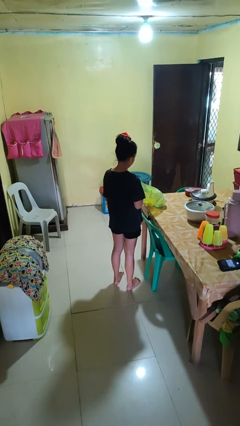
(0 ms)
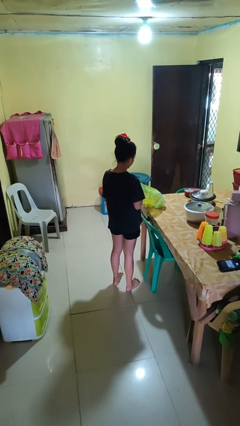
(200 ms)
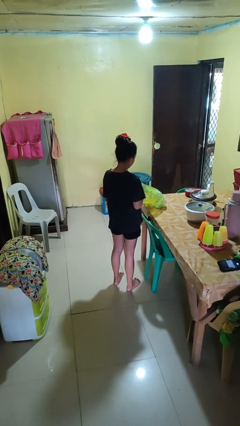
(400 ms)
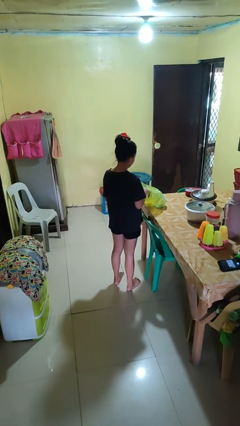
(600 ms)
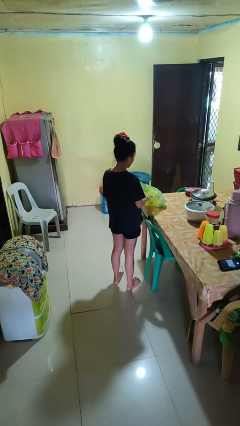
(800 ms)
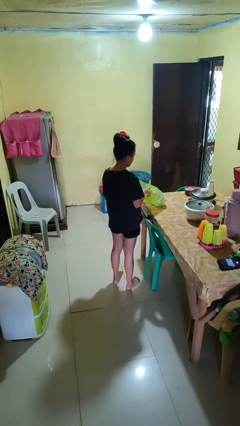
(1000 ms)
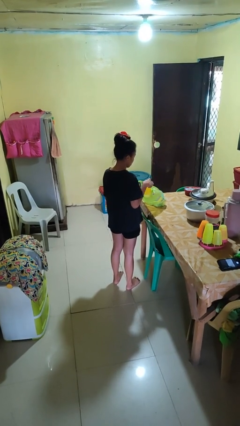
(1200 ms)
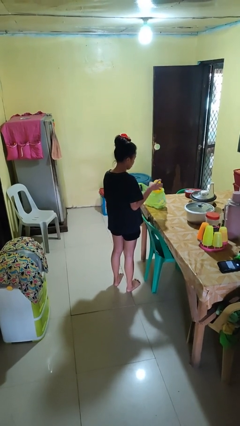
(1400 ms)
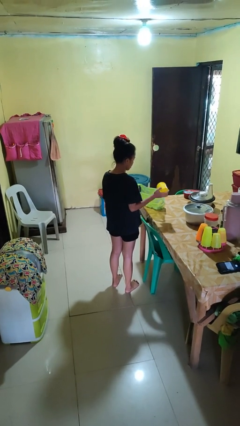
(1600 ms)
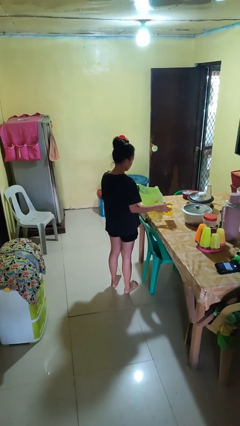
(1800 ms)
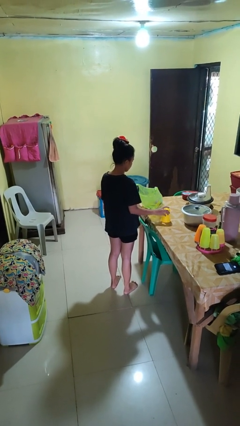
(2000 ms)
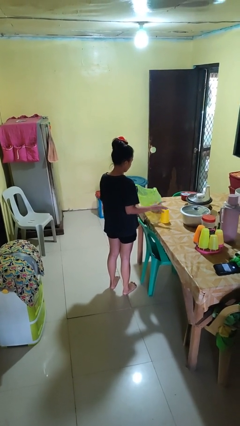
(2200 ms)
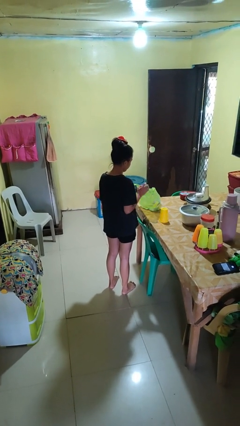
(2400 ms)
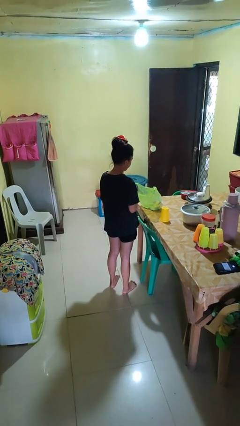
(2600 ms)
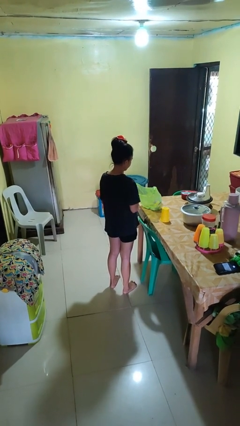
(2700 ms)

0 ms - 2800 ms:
person takes object from bag

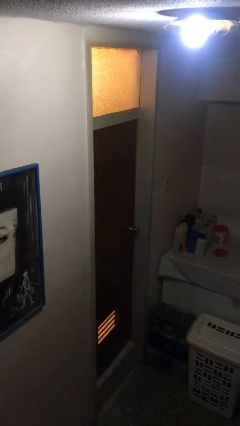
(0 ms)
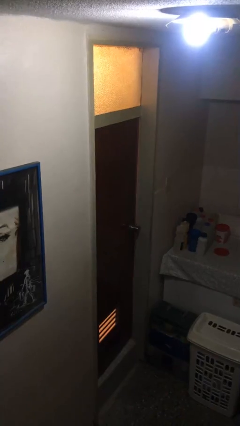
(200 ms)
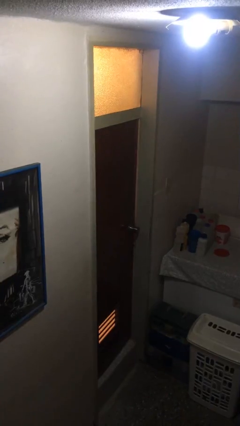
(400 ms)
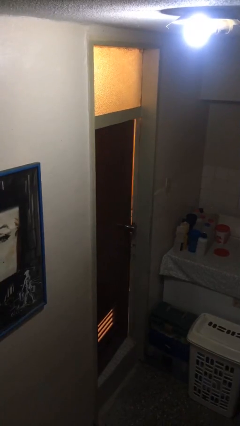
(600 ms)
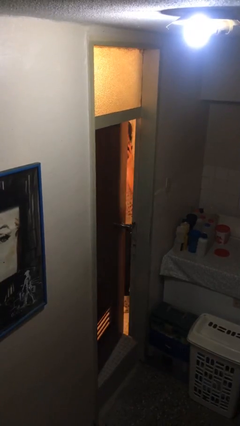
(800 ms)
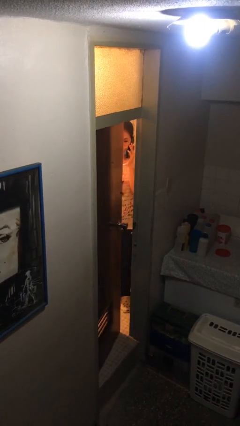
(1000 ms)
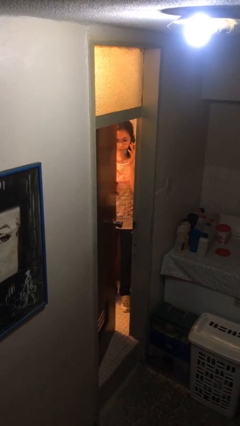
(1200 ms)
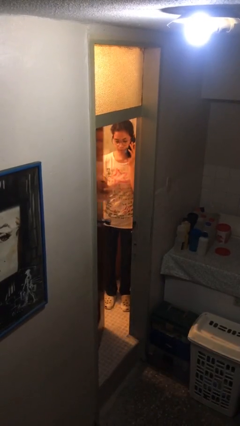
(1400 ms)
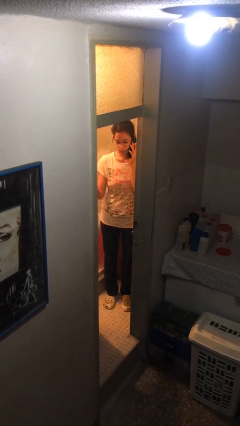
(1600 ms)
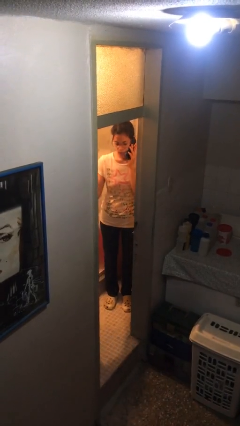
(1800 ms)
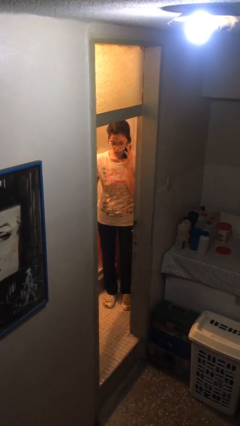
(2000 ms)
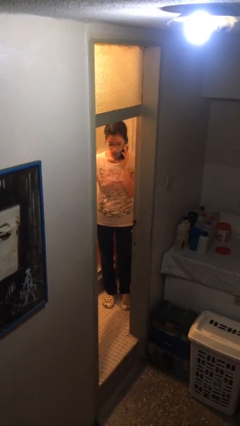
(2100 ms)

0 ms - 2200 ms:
person opens facility door

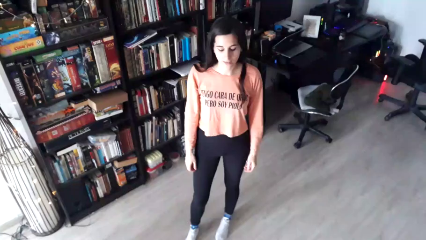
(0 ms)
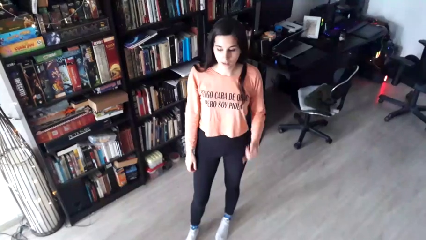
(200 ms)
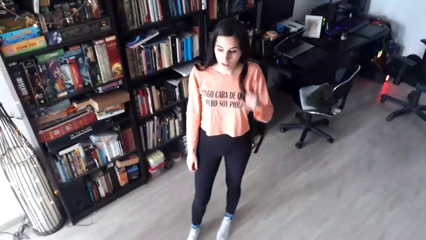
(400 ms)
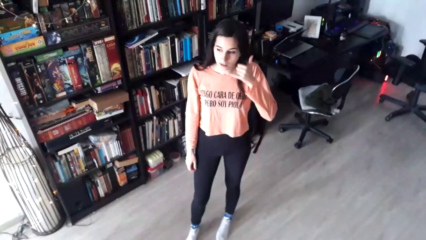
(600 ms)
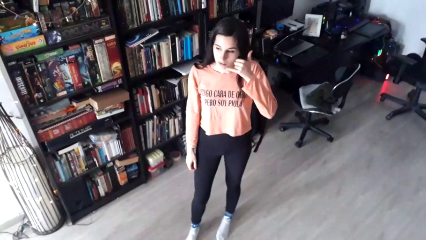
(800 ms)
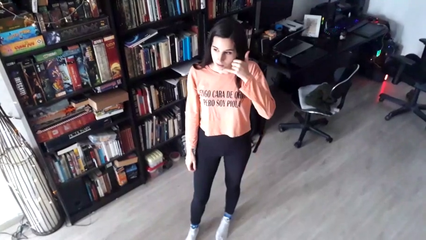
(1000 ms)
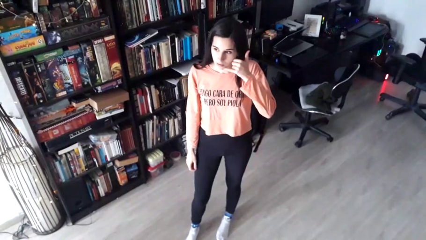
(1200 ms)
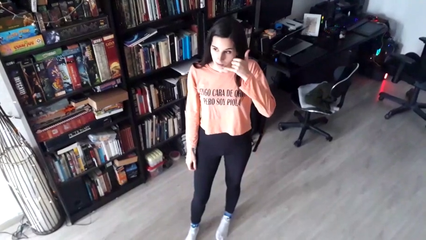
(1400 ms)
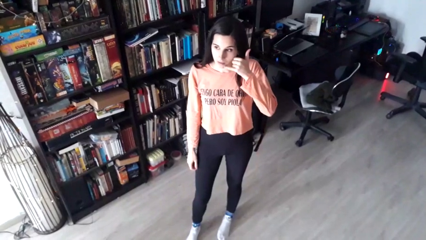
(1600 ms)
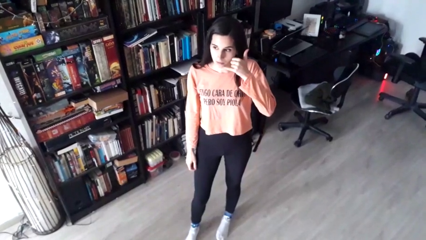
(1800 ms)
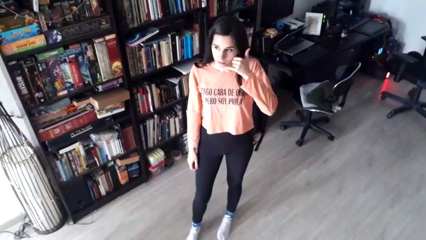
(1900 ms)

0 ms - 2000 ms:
person gestures call me

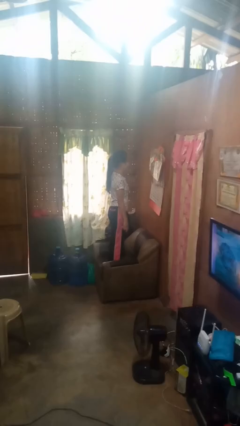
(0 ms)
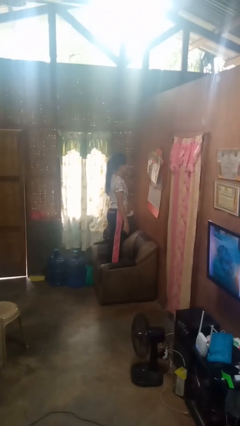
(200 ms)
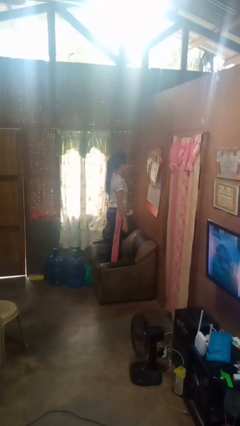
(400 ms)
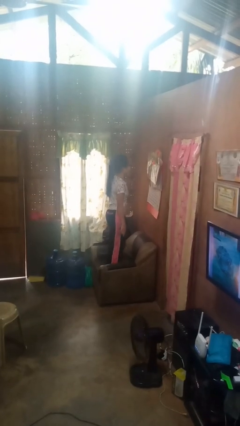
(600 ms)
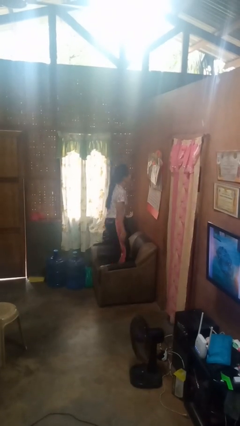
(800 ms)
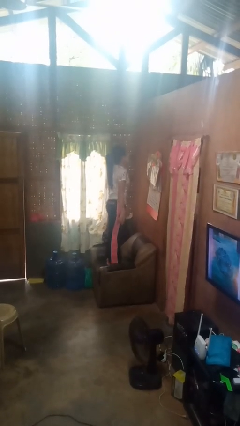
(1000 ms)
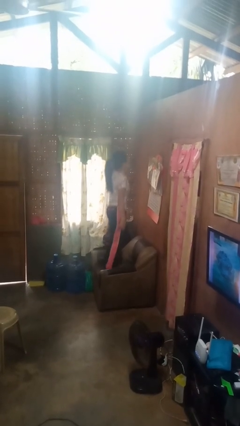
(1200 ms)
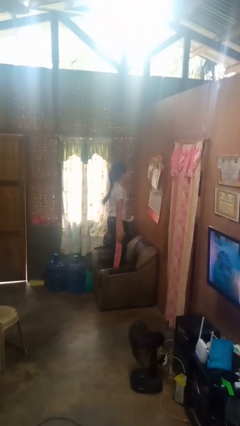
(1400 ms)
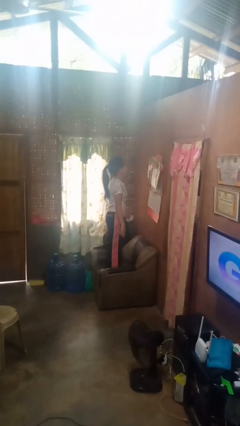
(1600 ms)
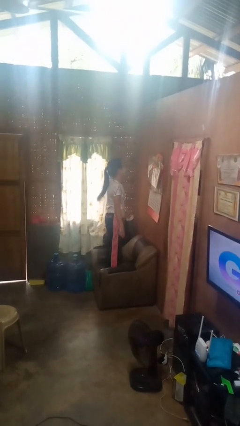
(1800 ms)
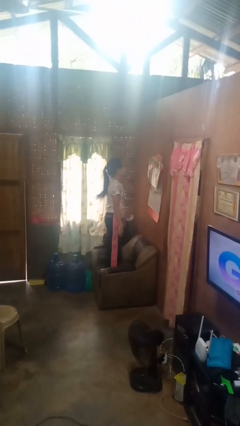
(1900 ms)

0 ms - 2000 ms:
person jumps on couch

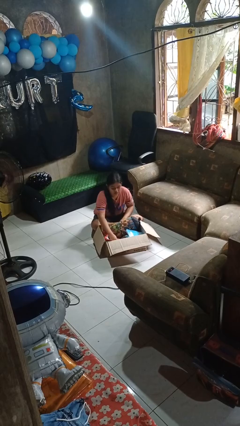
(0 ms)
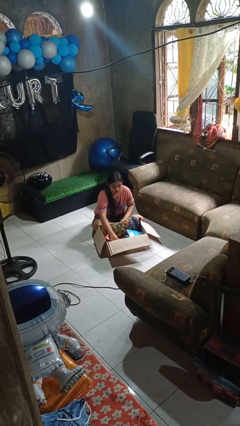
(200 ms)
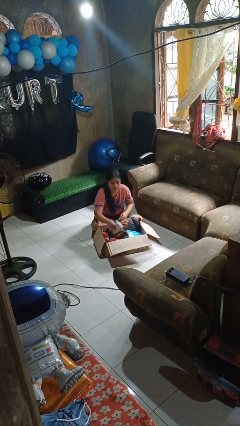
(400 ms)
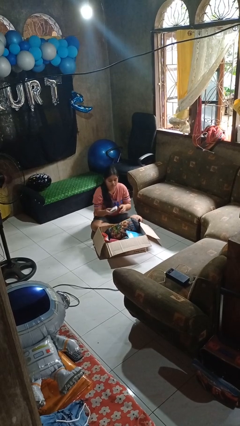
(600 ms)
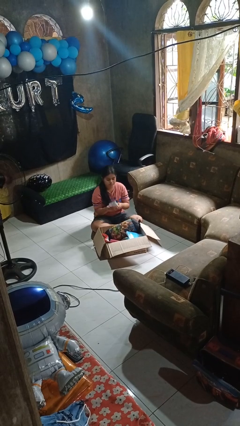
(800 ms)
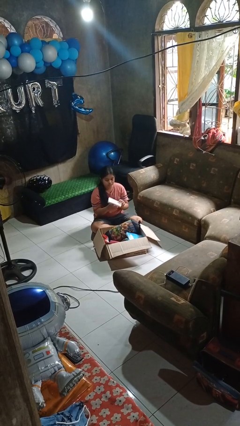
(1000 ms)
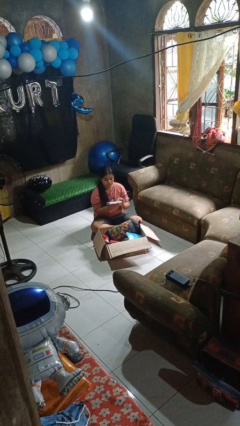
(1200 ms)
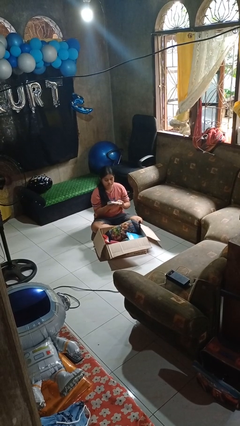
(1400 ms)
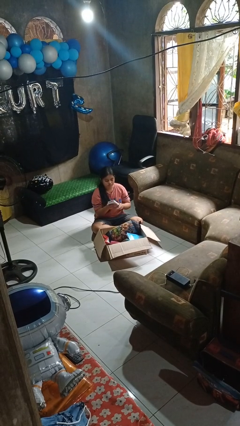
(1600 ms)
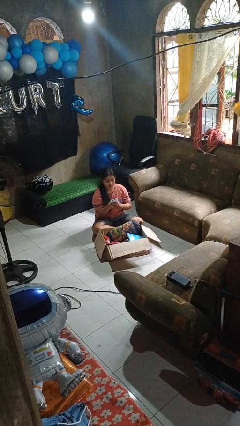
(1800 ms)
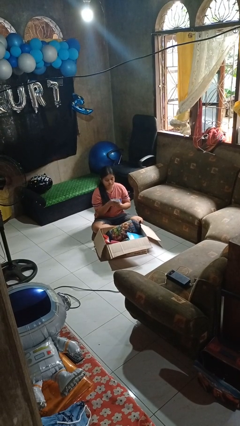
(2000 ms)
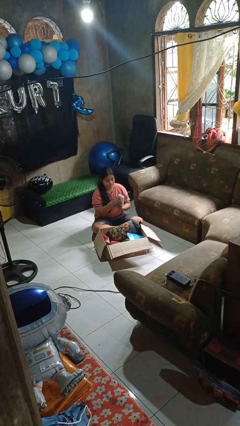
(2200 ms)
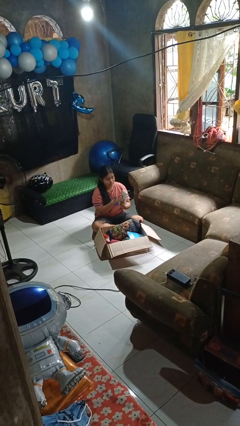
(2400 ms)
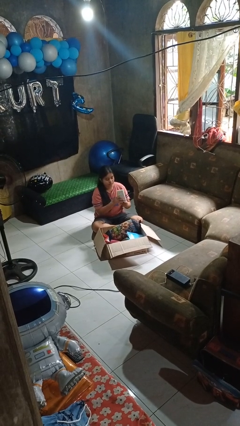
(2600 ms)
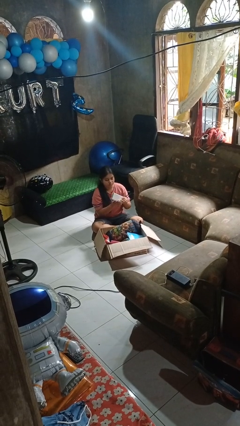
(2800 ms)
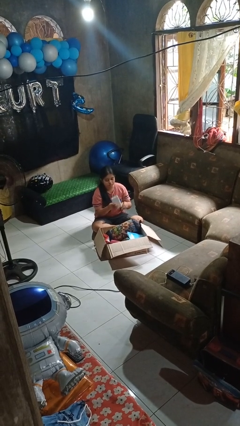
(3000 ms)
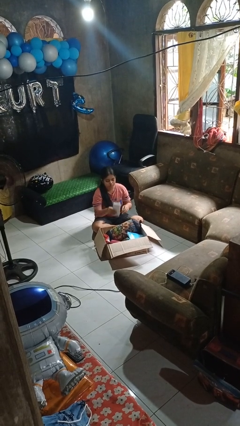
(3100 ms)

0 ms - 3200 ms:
person takes object from box

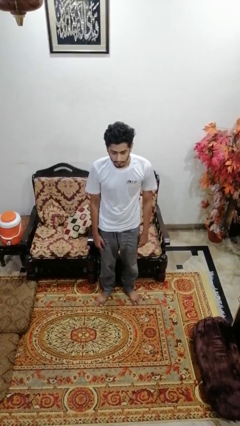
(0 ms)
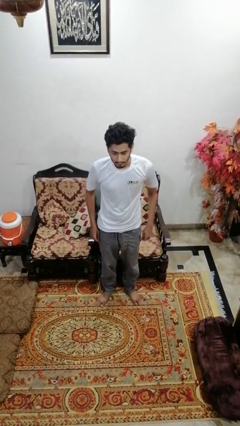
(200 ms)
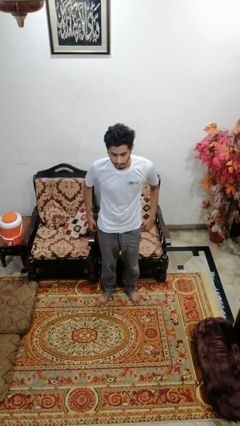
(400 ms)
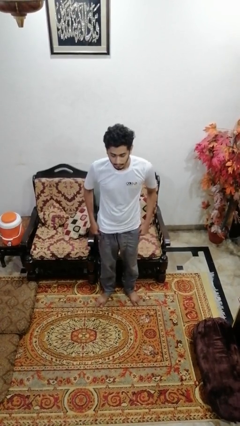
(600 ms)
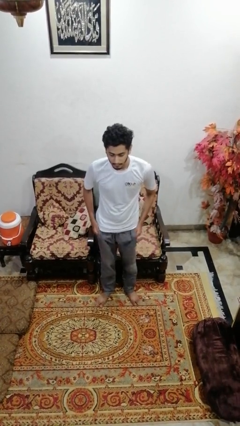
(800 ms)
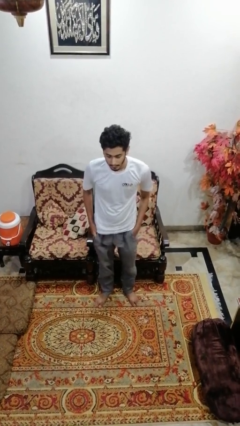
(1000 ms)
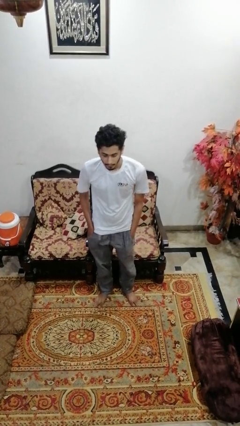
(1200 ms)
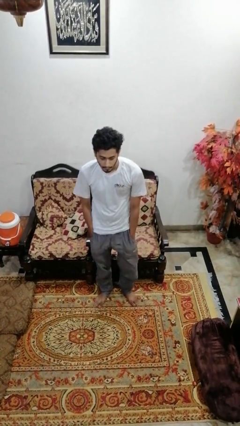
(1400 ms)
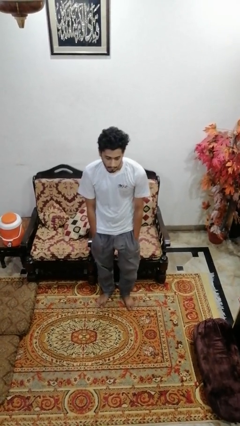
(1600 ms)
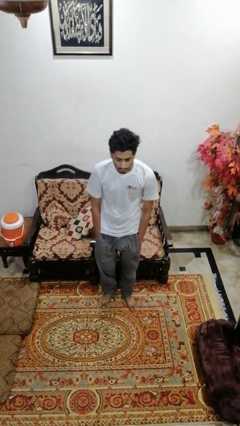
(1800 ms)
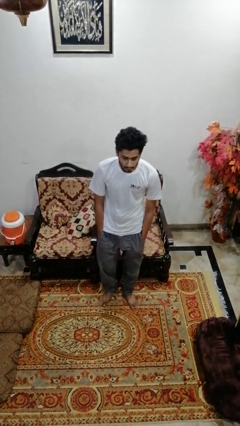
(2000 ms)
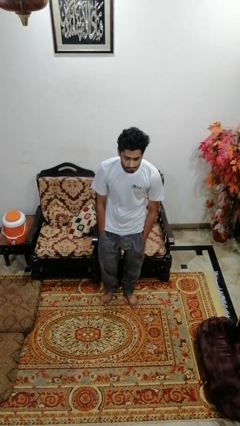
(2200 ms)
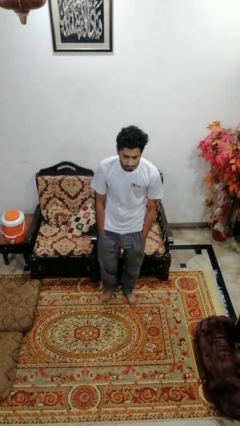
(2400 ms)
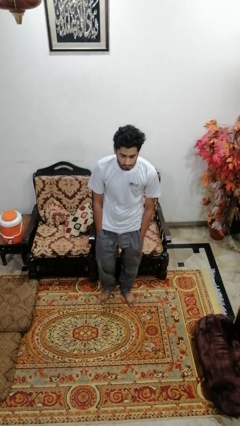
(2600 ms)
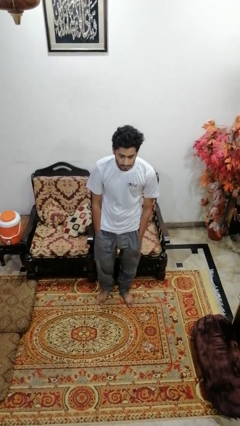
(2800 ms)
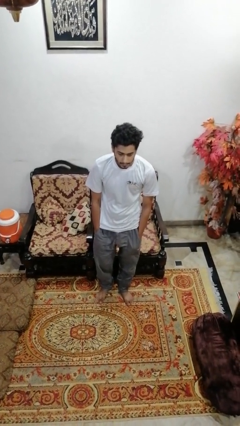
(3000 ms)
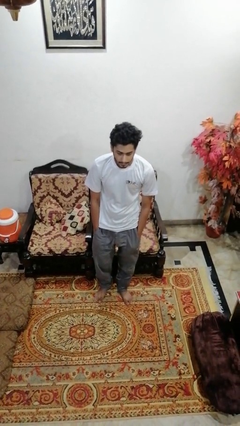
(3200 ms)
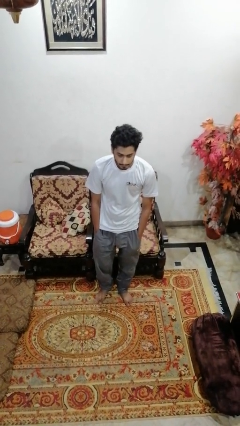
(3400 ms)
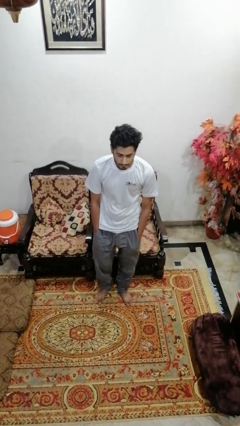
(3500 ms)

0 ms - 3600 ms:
person puts hands in back pockets

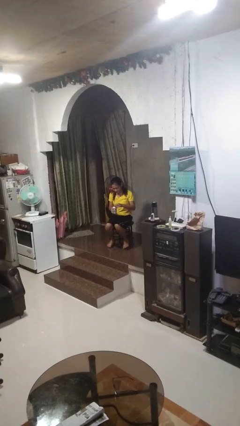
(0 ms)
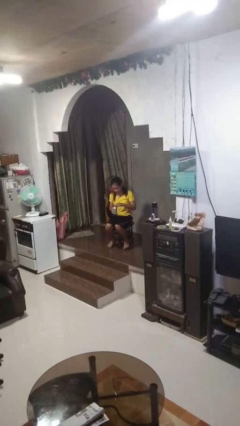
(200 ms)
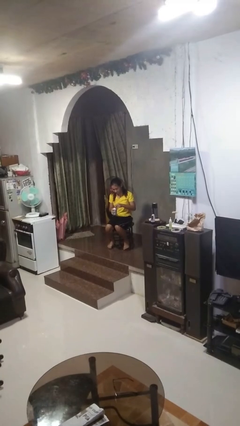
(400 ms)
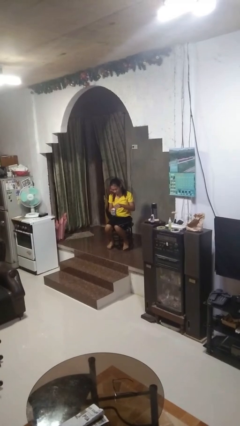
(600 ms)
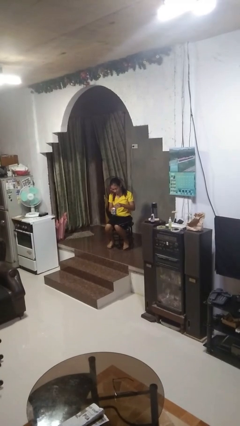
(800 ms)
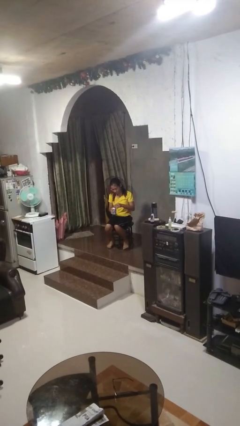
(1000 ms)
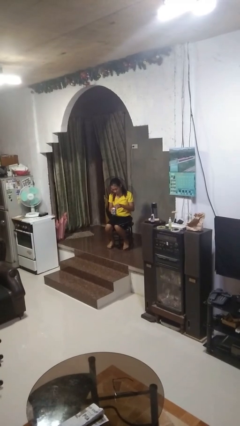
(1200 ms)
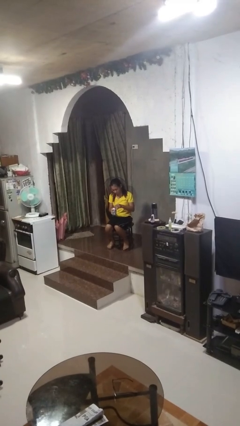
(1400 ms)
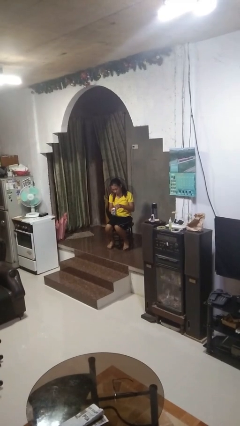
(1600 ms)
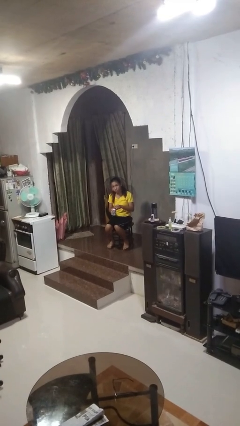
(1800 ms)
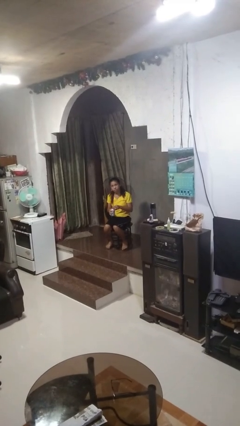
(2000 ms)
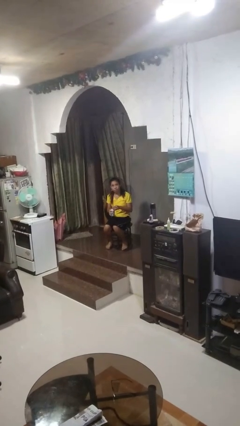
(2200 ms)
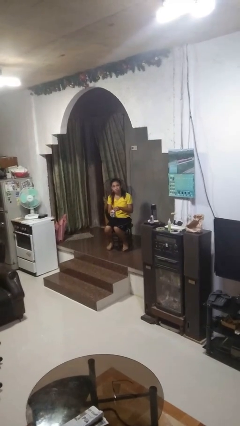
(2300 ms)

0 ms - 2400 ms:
person opens beverage can
